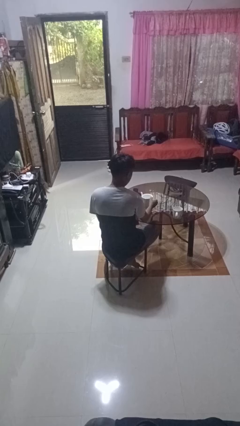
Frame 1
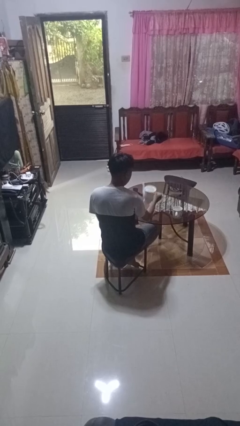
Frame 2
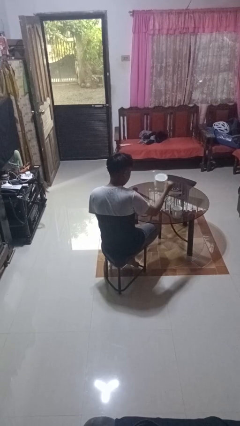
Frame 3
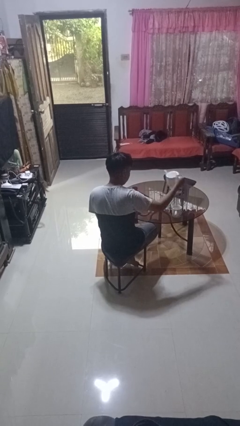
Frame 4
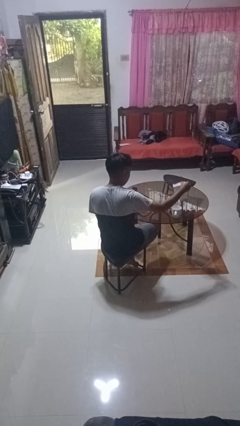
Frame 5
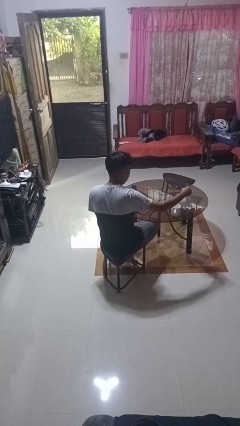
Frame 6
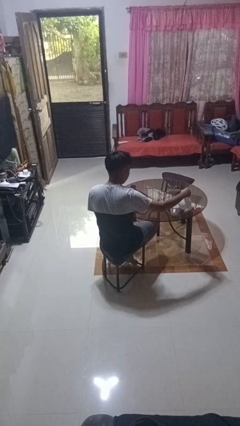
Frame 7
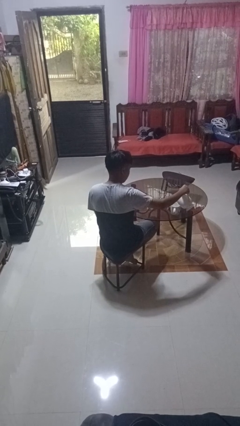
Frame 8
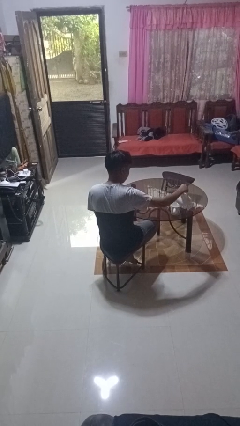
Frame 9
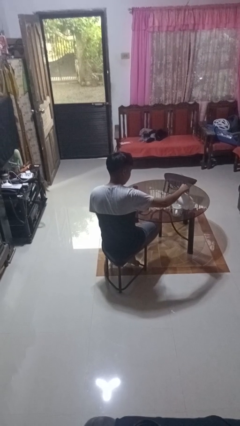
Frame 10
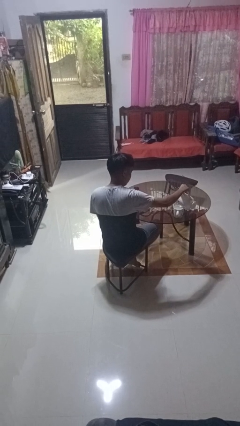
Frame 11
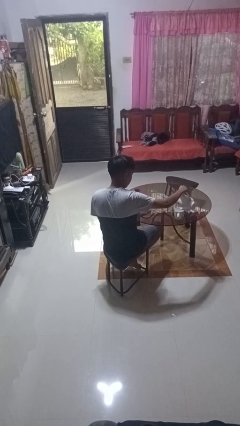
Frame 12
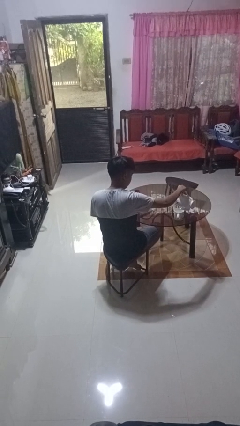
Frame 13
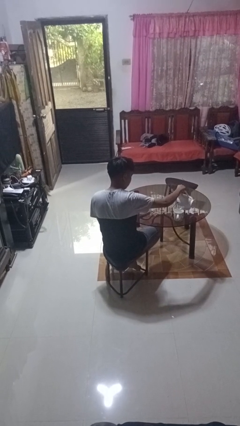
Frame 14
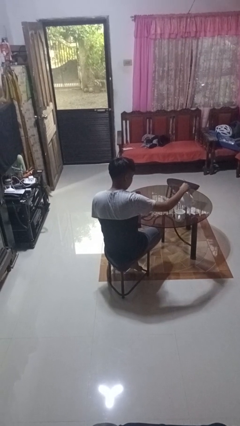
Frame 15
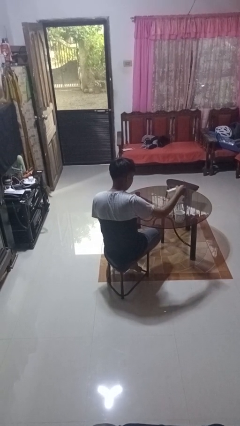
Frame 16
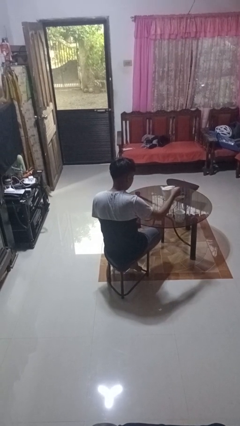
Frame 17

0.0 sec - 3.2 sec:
person pours coffee into mug

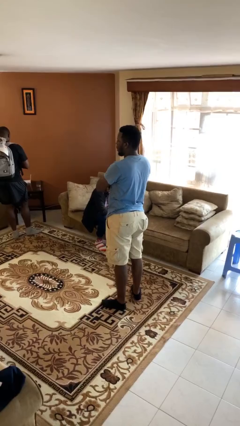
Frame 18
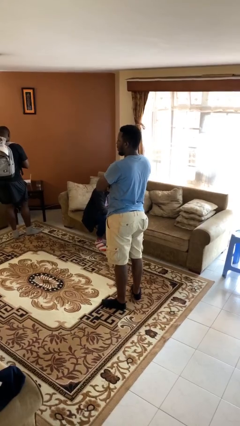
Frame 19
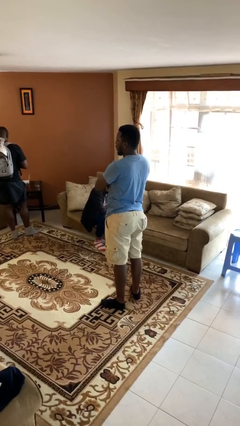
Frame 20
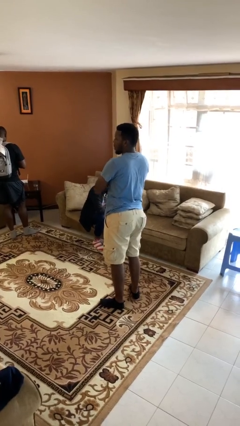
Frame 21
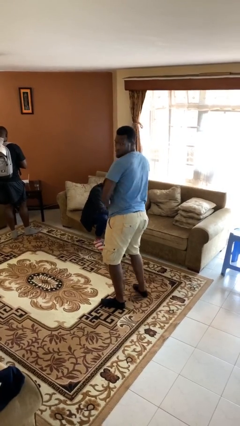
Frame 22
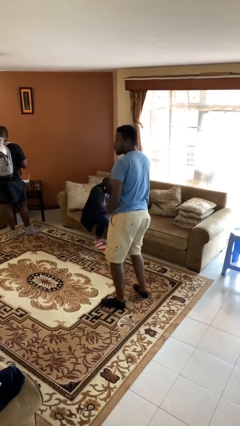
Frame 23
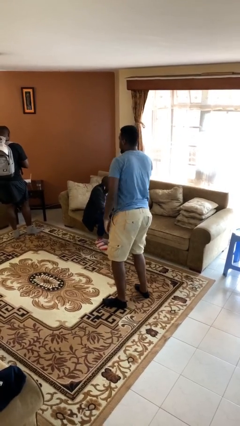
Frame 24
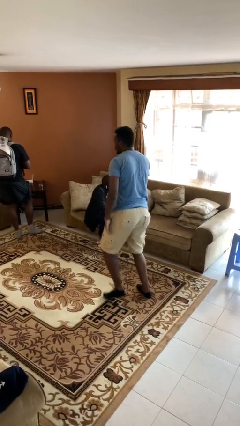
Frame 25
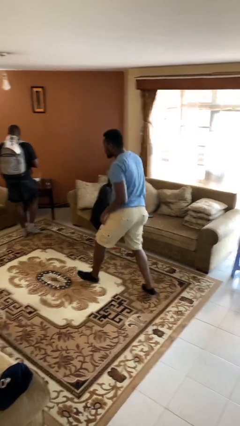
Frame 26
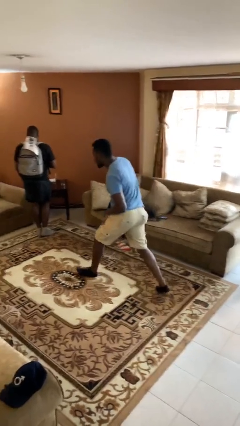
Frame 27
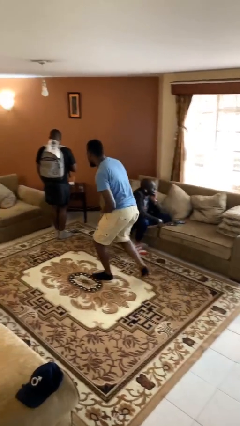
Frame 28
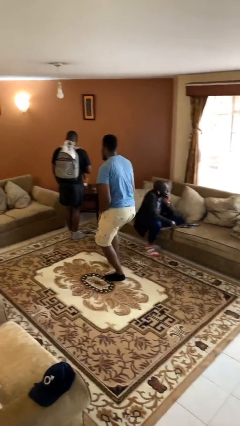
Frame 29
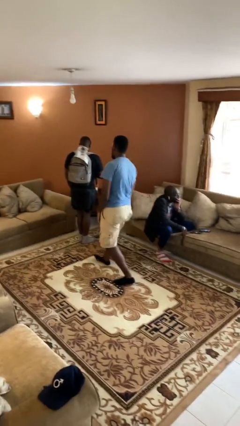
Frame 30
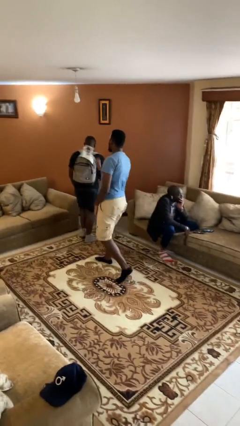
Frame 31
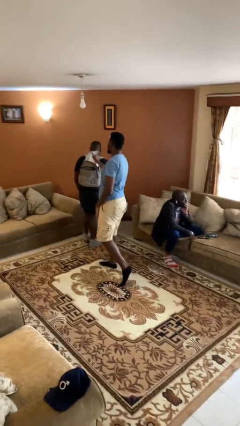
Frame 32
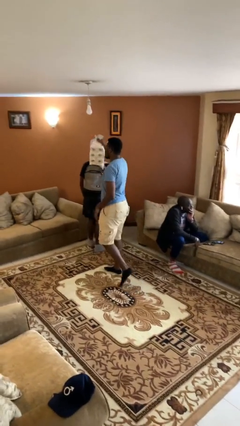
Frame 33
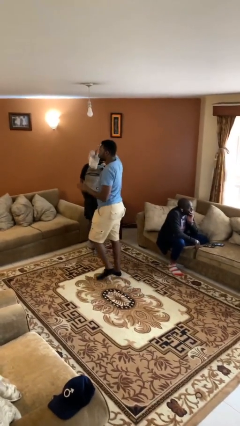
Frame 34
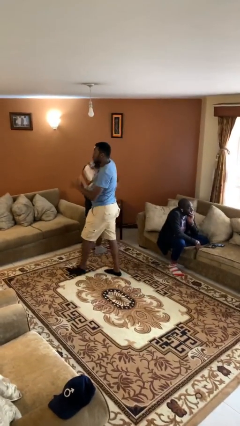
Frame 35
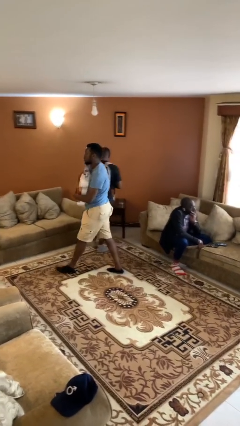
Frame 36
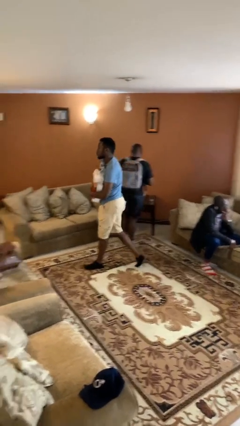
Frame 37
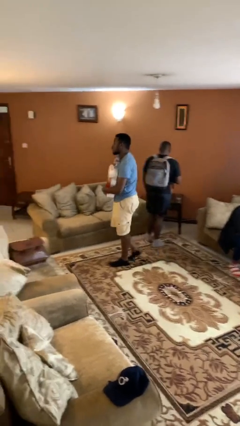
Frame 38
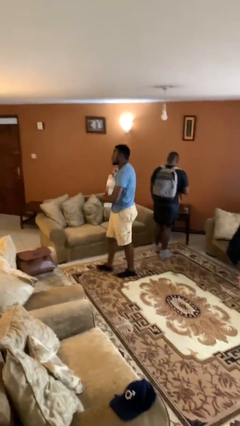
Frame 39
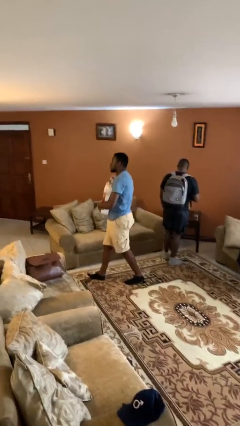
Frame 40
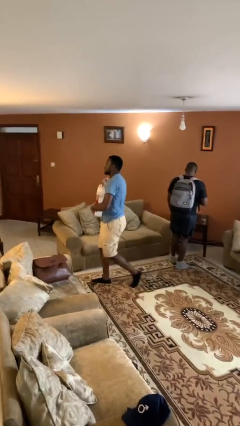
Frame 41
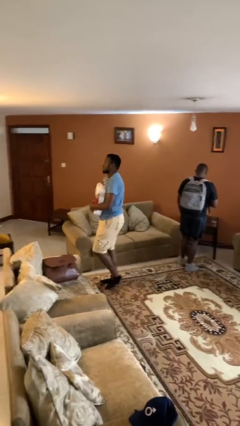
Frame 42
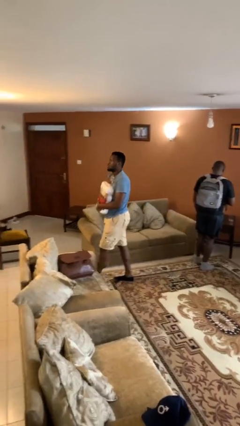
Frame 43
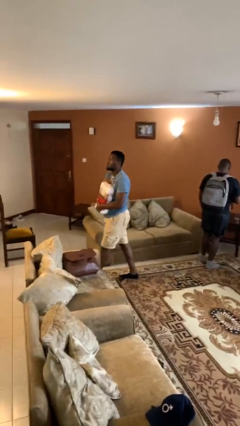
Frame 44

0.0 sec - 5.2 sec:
person steals object from person

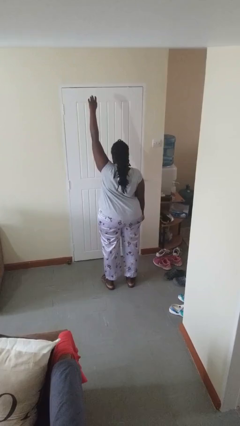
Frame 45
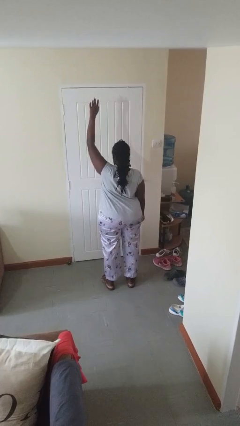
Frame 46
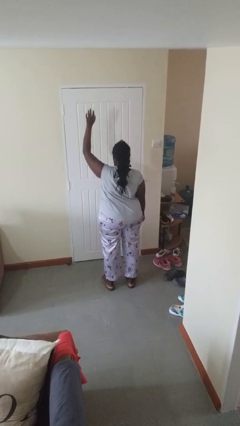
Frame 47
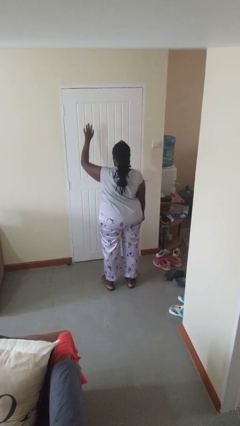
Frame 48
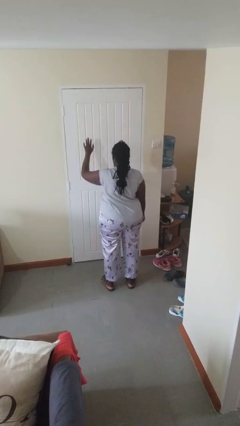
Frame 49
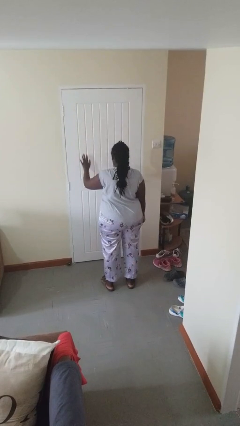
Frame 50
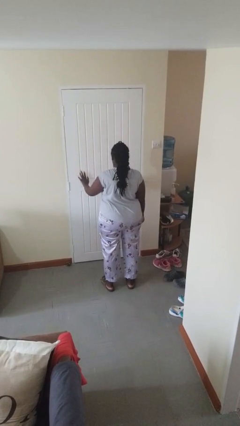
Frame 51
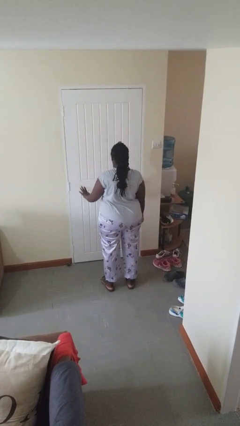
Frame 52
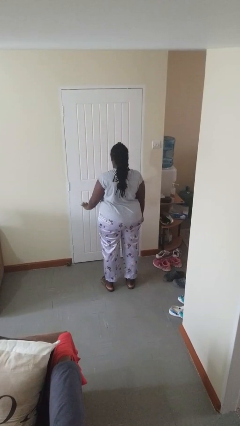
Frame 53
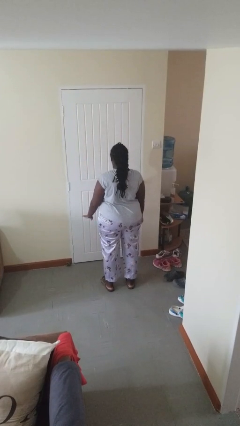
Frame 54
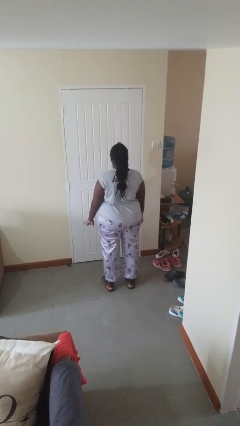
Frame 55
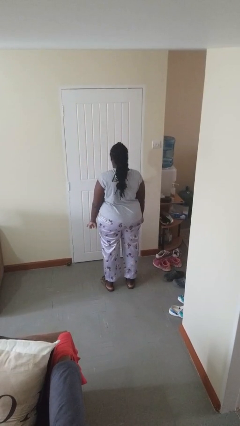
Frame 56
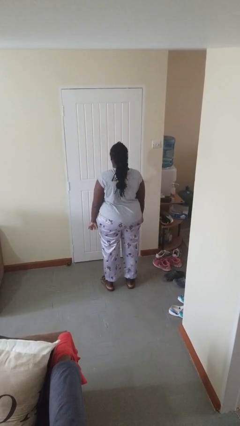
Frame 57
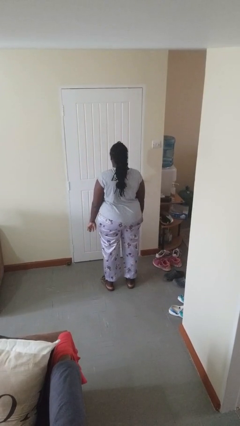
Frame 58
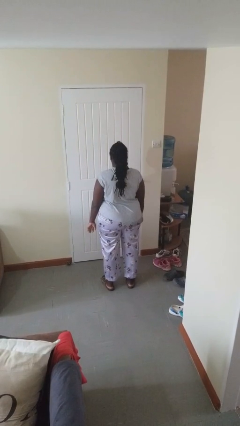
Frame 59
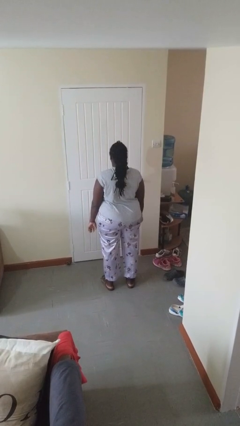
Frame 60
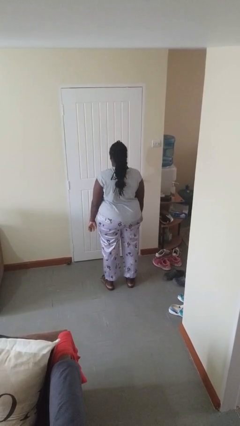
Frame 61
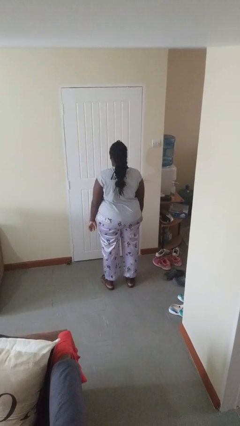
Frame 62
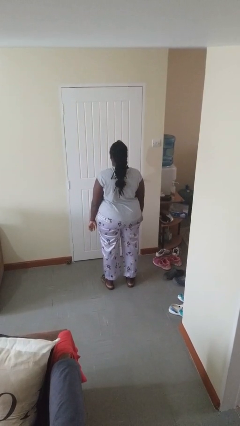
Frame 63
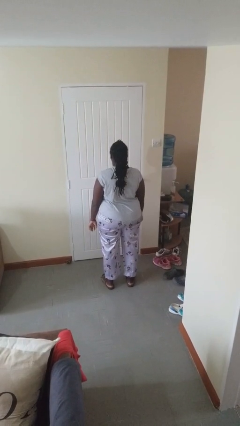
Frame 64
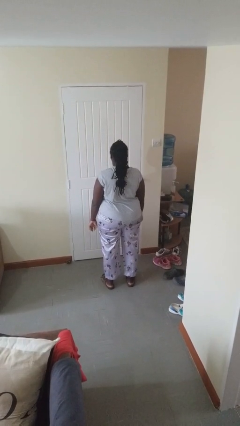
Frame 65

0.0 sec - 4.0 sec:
person gestures swipe down

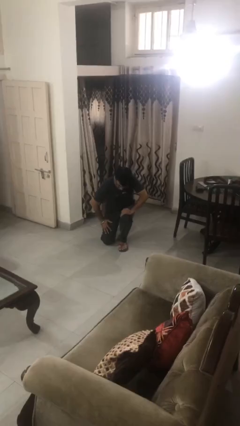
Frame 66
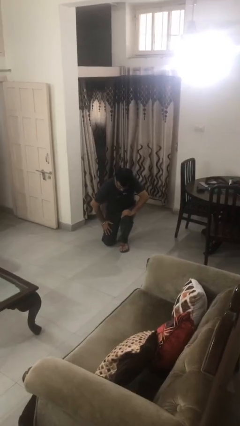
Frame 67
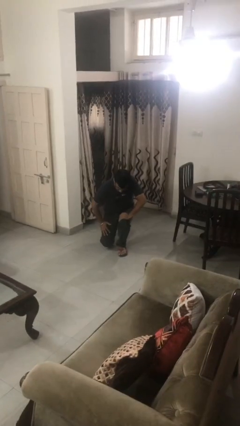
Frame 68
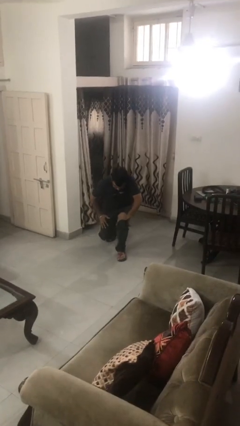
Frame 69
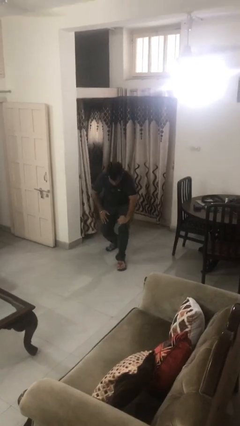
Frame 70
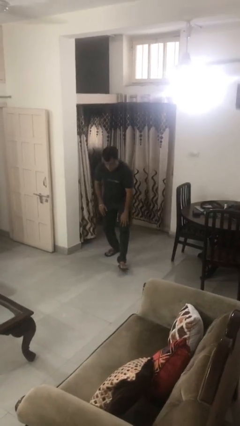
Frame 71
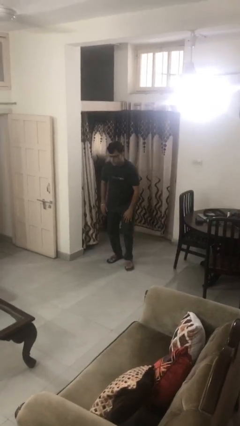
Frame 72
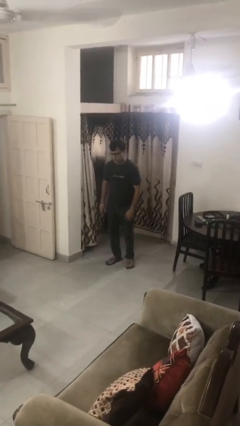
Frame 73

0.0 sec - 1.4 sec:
person stands up from floor

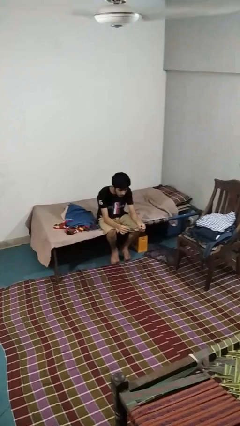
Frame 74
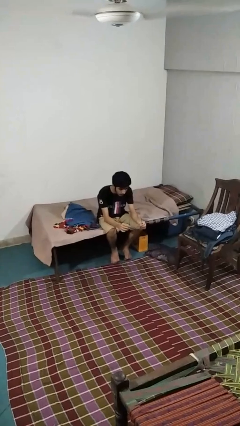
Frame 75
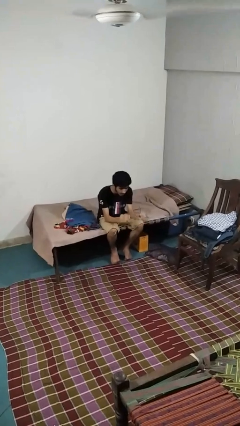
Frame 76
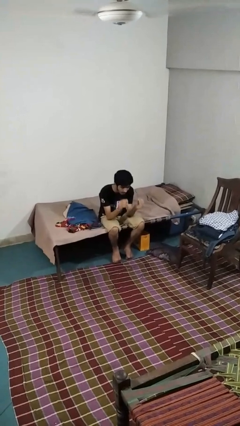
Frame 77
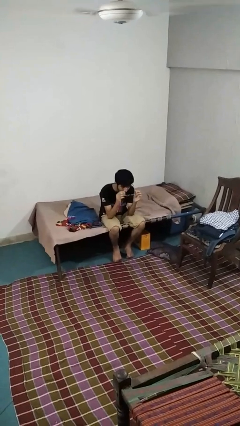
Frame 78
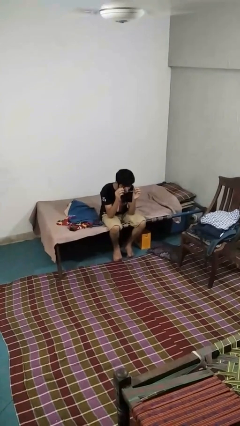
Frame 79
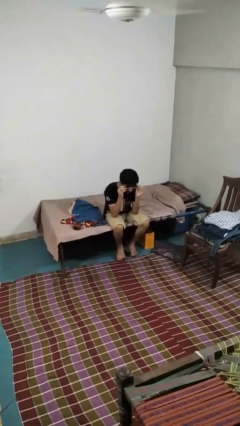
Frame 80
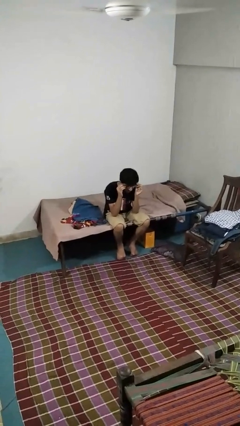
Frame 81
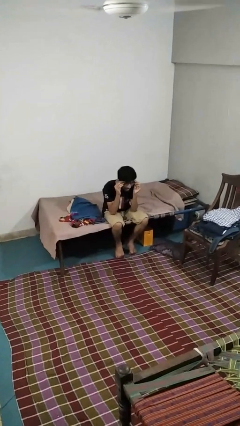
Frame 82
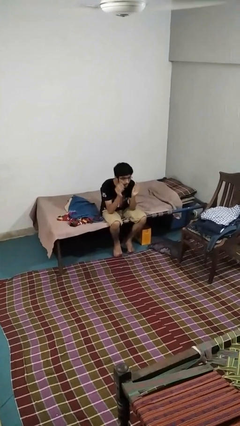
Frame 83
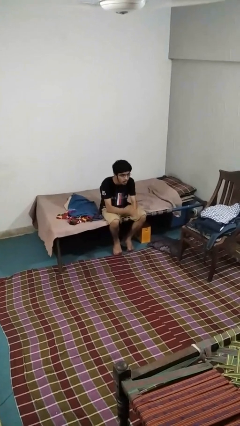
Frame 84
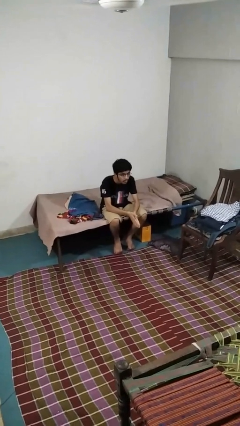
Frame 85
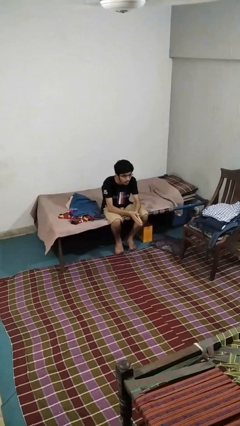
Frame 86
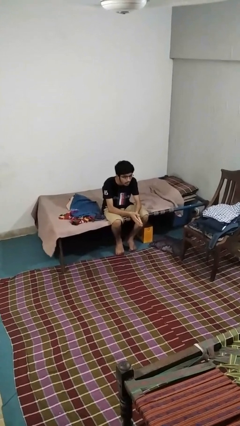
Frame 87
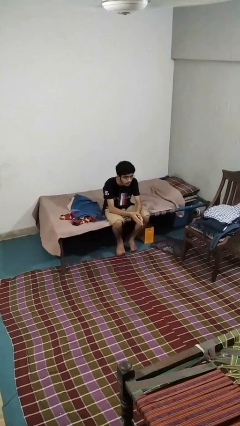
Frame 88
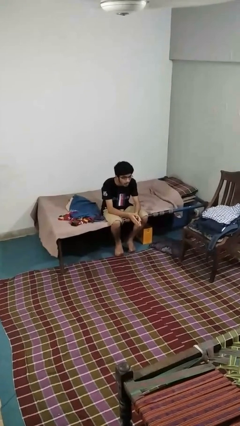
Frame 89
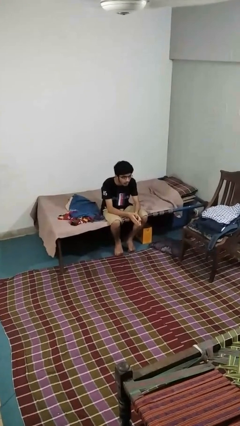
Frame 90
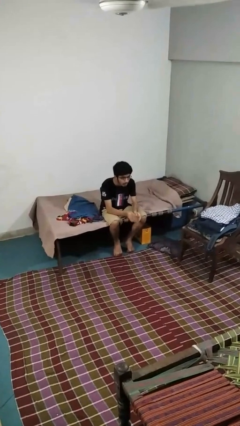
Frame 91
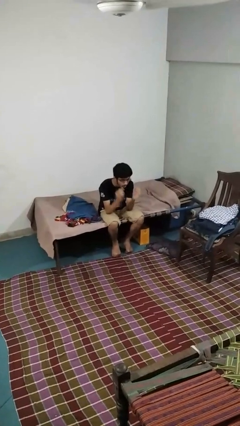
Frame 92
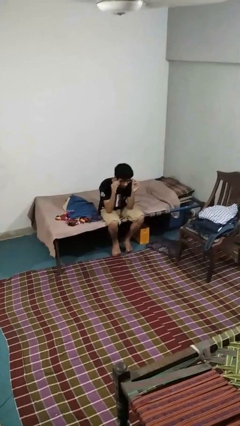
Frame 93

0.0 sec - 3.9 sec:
person puts on glasses

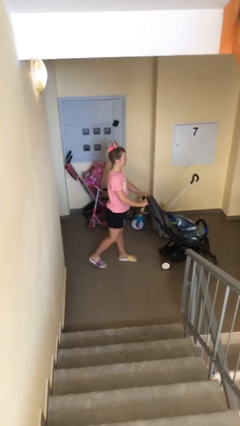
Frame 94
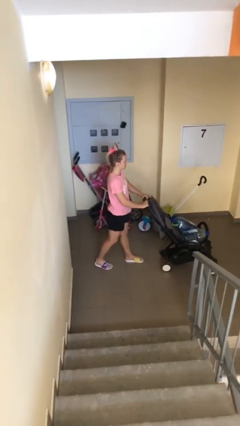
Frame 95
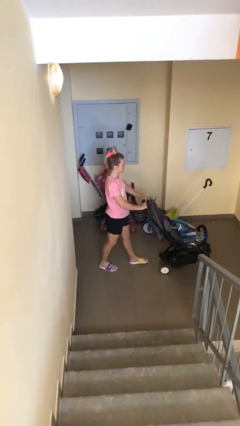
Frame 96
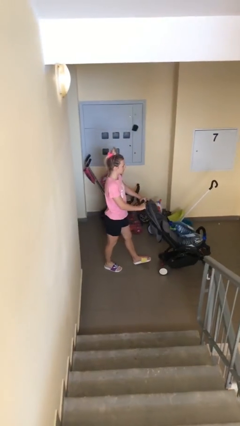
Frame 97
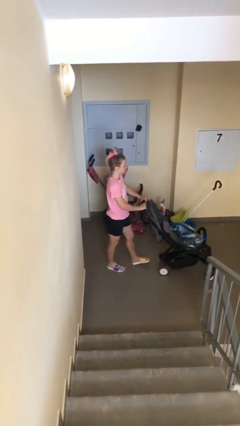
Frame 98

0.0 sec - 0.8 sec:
person pulls wheeled cart
